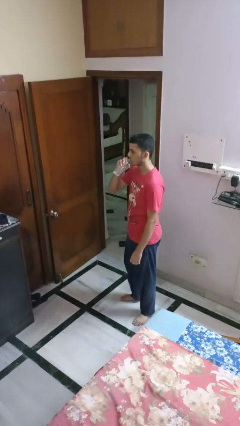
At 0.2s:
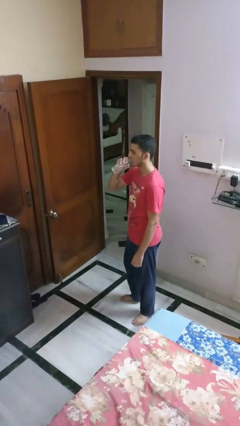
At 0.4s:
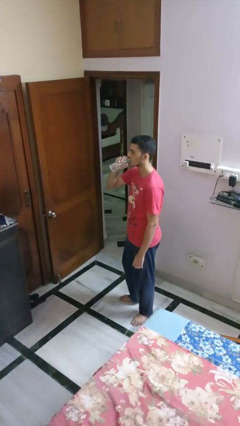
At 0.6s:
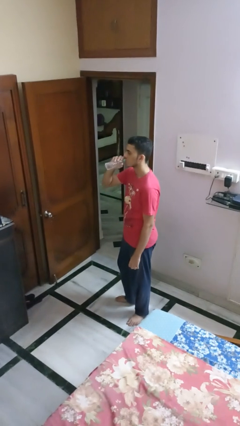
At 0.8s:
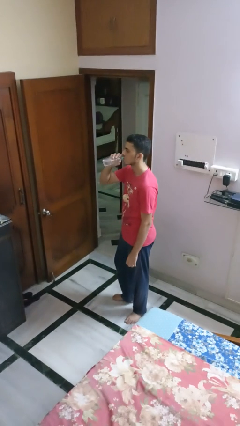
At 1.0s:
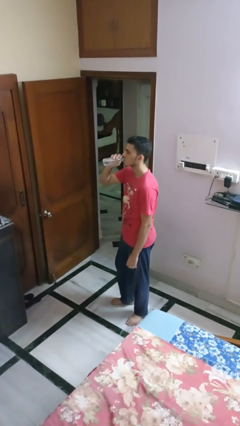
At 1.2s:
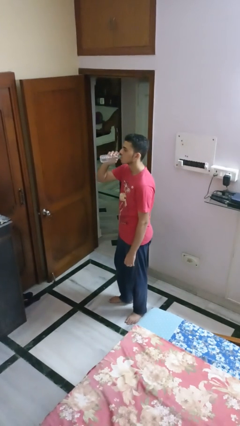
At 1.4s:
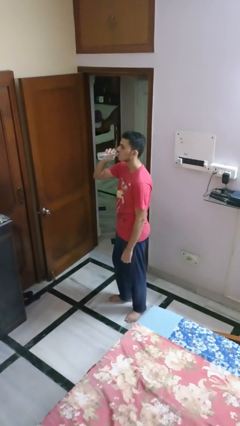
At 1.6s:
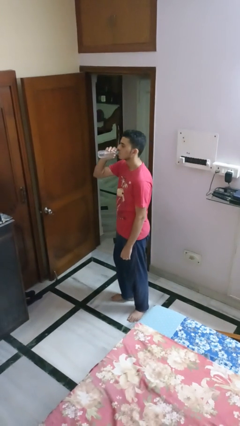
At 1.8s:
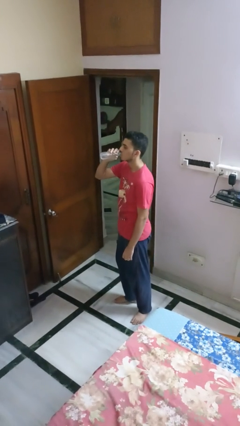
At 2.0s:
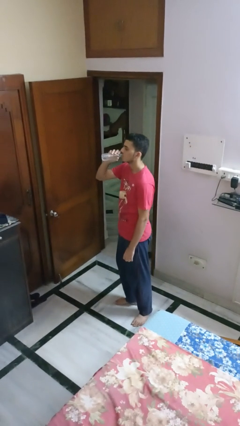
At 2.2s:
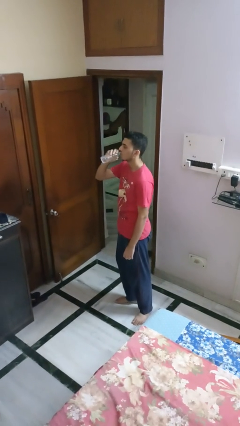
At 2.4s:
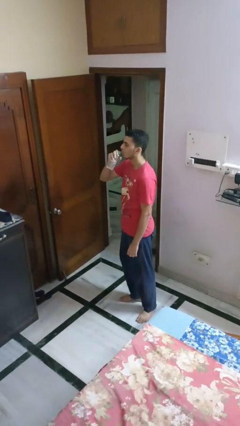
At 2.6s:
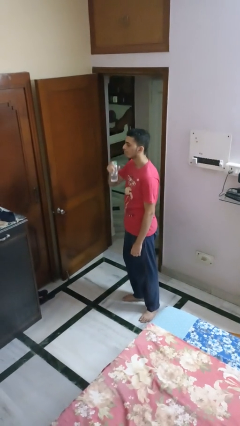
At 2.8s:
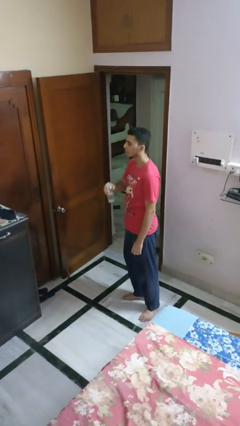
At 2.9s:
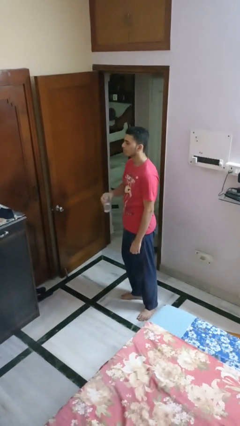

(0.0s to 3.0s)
person drinks from bottle

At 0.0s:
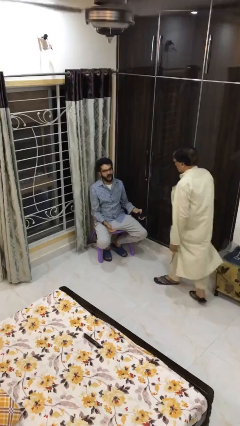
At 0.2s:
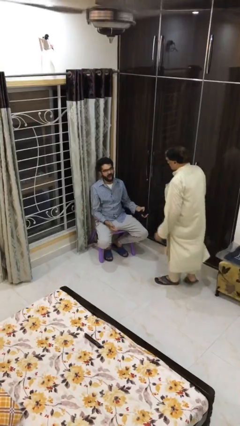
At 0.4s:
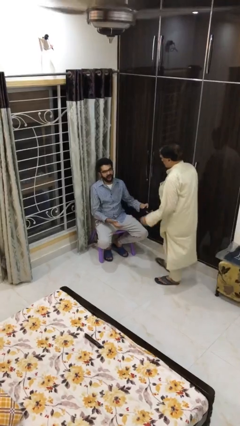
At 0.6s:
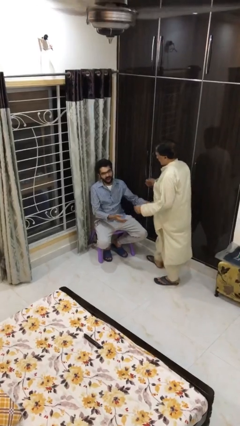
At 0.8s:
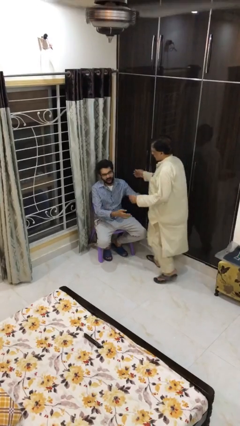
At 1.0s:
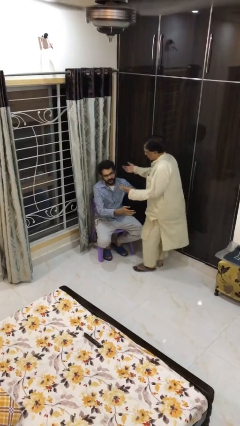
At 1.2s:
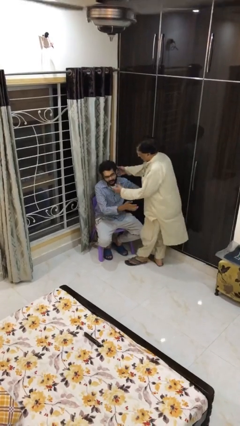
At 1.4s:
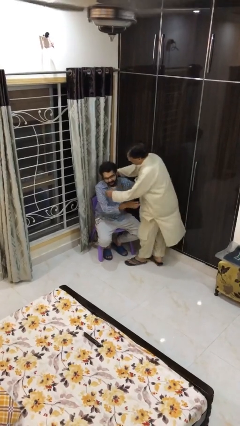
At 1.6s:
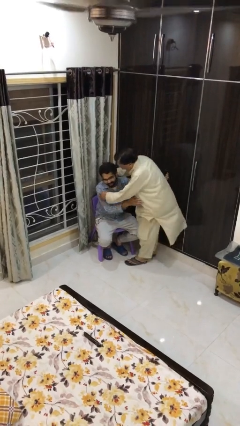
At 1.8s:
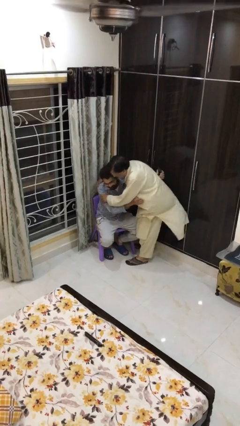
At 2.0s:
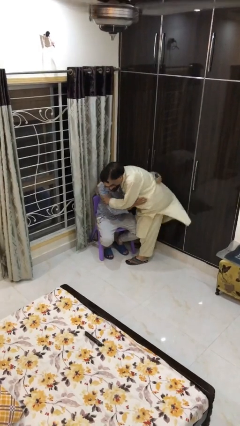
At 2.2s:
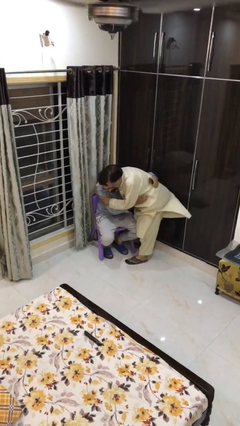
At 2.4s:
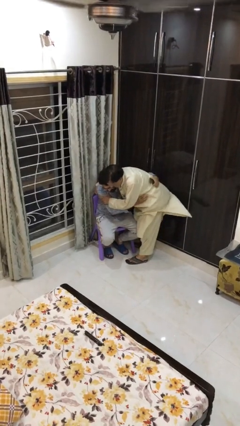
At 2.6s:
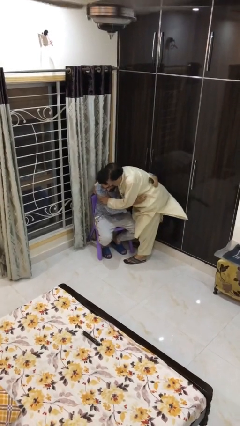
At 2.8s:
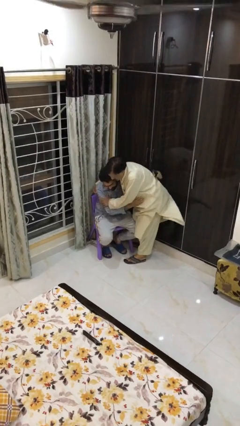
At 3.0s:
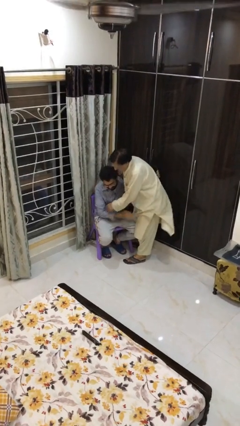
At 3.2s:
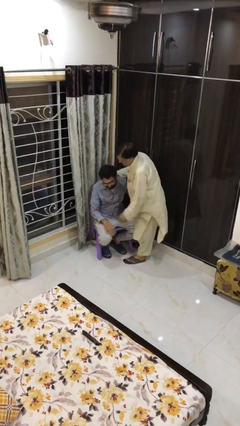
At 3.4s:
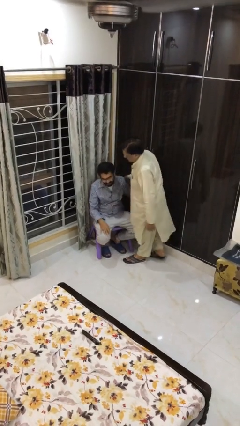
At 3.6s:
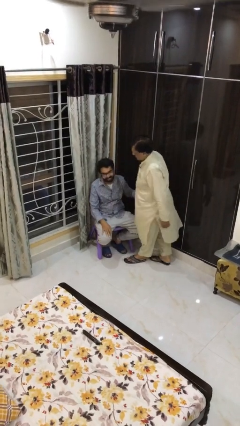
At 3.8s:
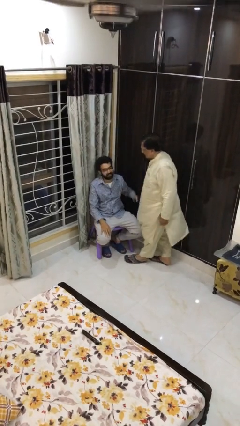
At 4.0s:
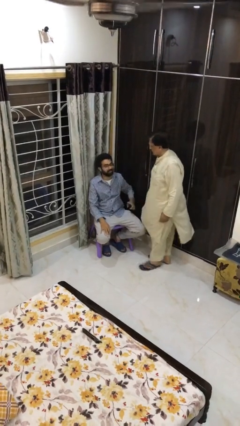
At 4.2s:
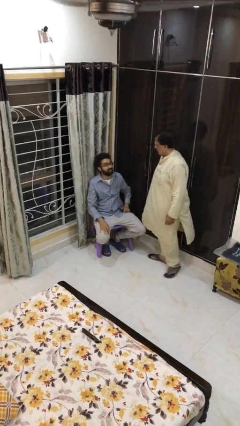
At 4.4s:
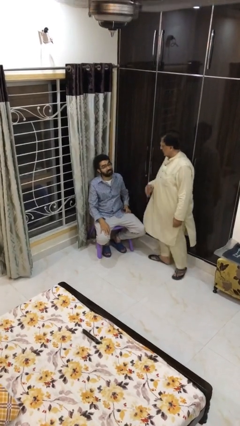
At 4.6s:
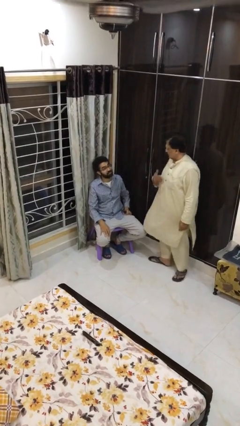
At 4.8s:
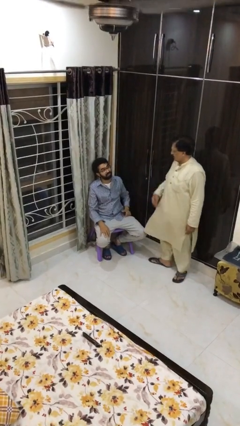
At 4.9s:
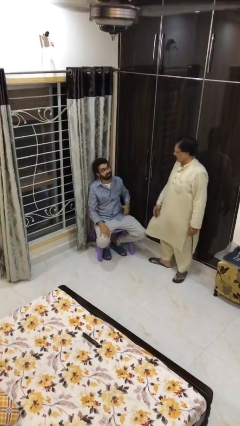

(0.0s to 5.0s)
person embraces person

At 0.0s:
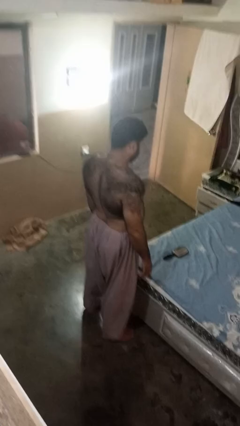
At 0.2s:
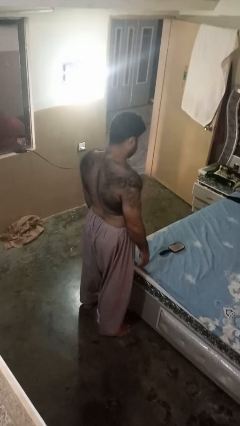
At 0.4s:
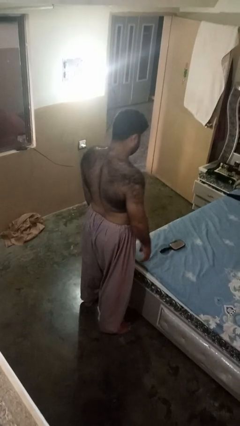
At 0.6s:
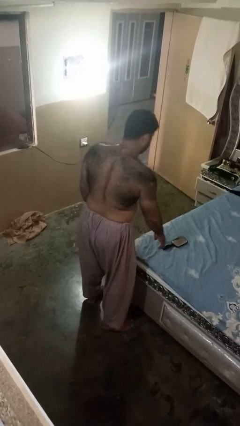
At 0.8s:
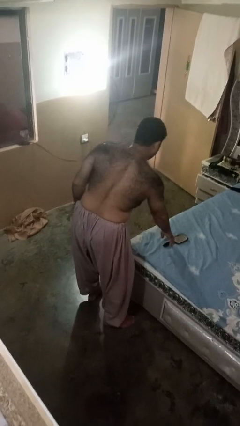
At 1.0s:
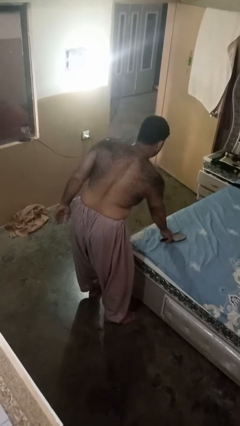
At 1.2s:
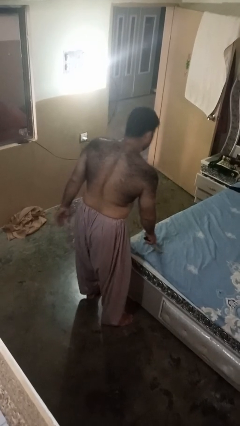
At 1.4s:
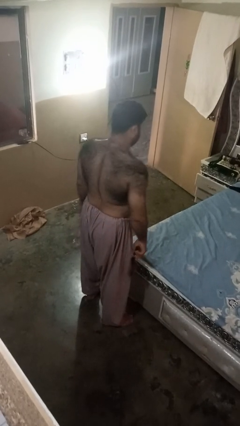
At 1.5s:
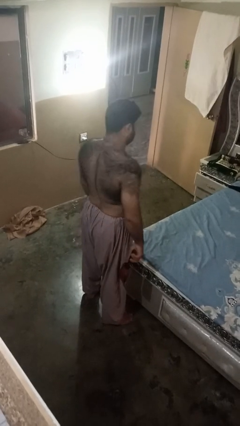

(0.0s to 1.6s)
person picks up object from bed

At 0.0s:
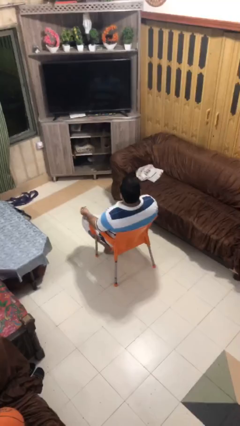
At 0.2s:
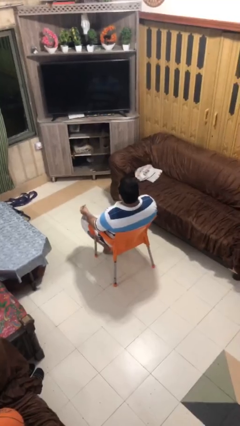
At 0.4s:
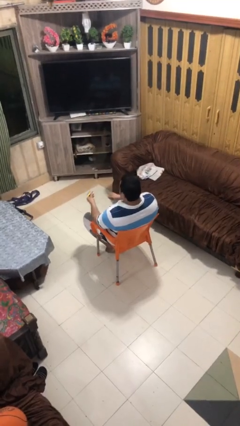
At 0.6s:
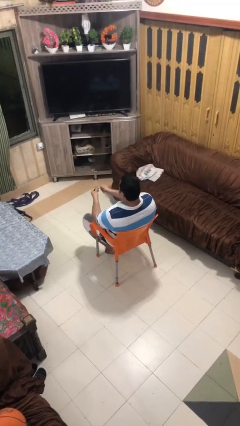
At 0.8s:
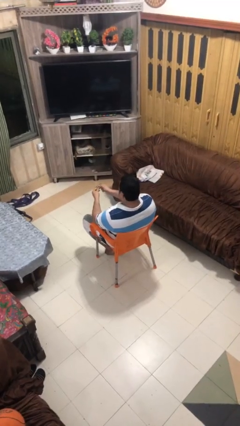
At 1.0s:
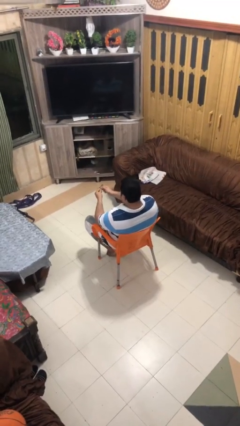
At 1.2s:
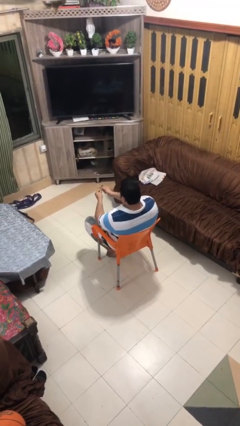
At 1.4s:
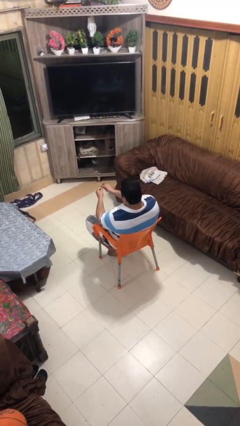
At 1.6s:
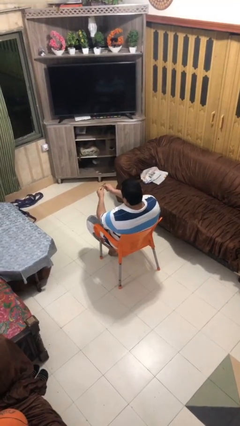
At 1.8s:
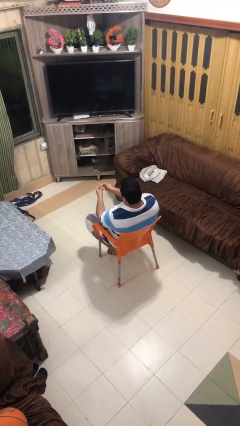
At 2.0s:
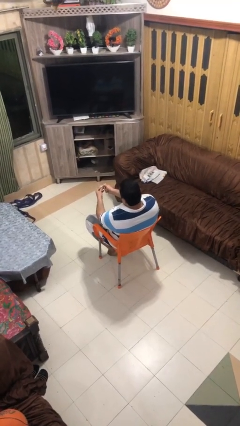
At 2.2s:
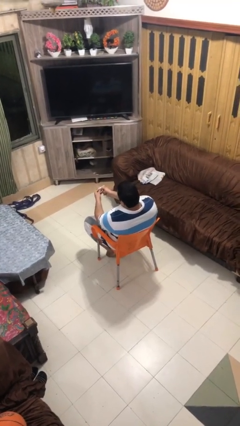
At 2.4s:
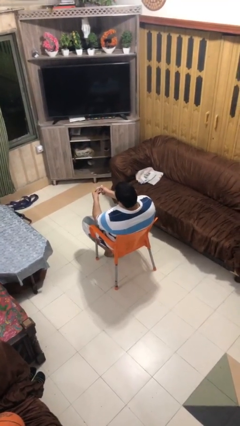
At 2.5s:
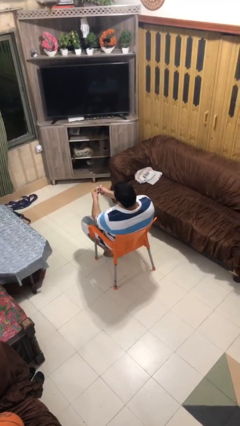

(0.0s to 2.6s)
person files fingernails

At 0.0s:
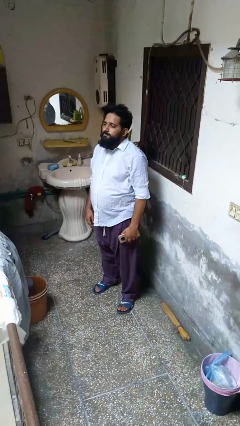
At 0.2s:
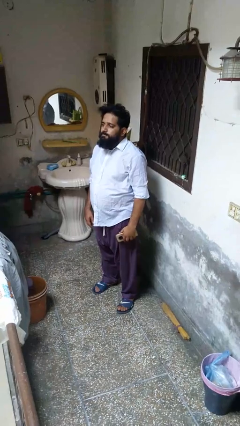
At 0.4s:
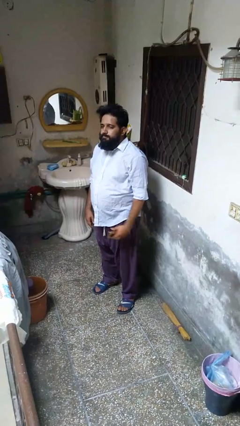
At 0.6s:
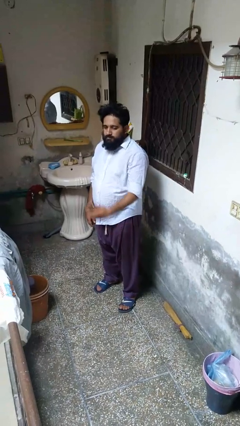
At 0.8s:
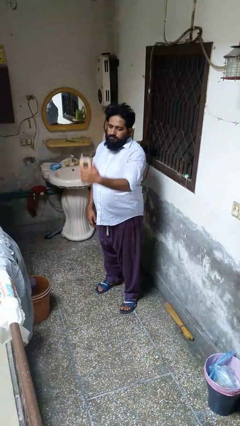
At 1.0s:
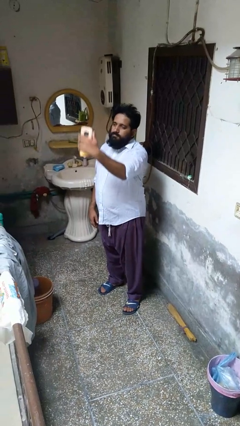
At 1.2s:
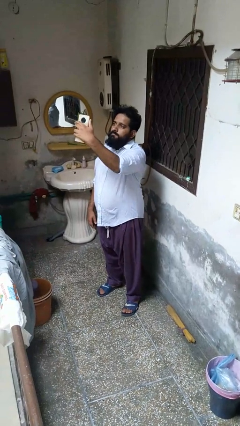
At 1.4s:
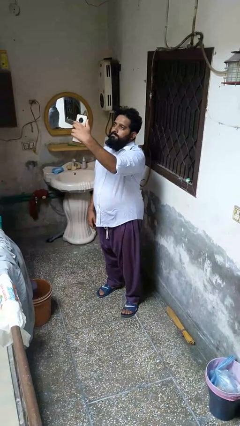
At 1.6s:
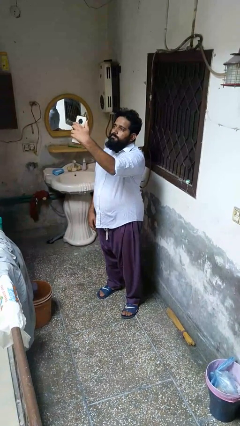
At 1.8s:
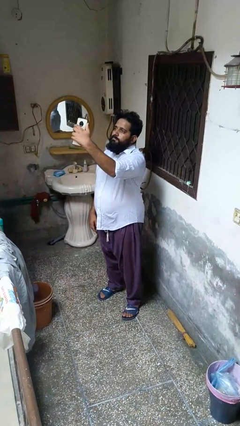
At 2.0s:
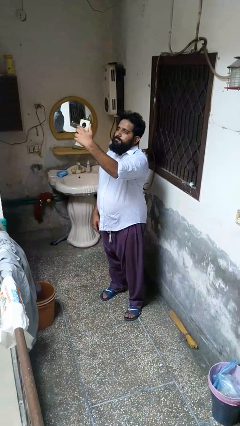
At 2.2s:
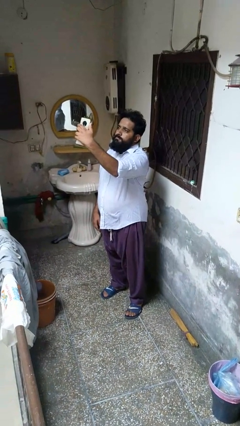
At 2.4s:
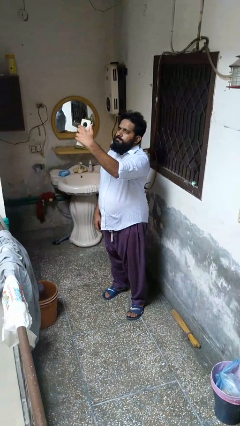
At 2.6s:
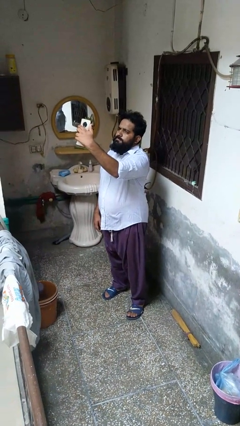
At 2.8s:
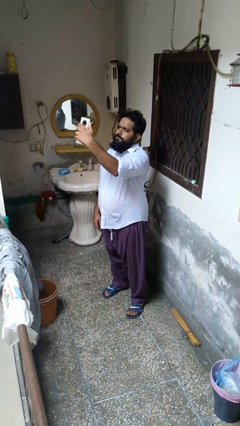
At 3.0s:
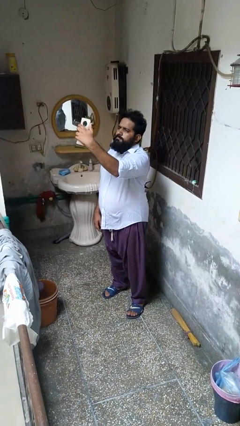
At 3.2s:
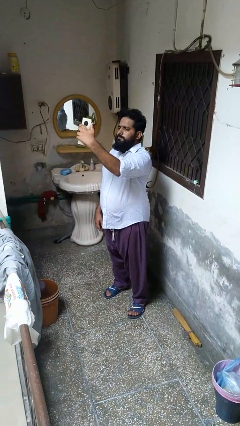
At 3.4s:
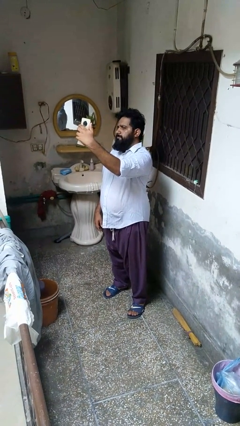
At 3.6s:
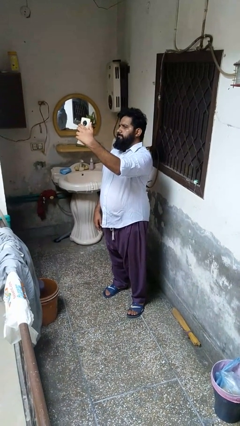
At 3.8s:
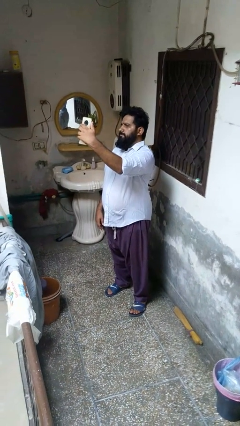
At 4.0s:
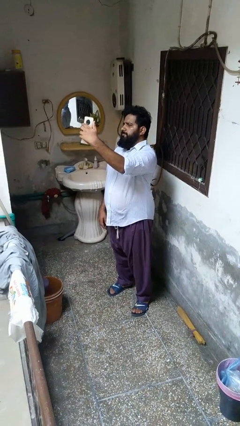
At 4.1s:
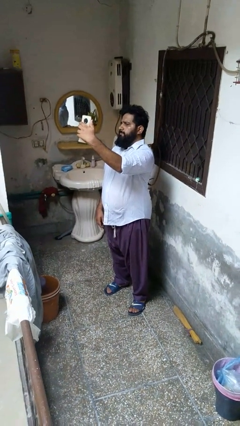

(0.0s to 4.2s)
person takes selfie

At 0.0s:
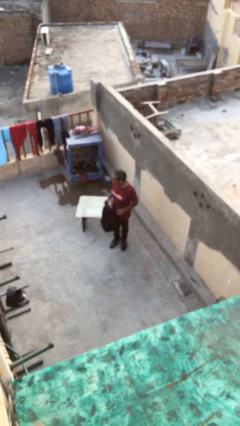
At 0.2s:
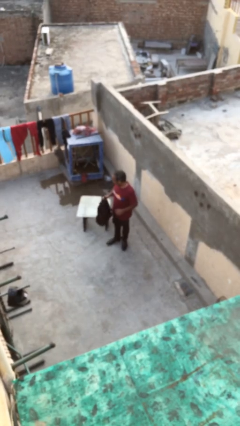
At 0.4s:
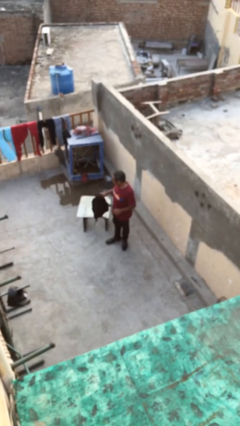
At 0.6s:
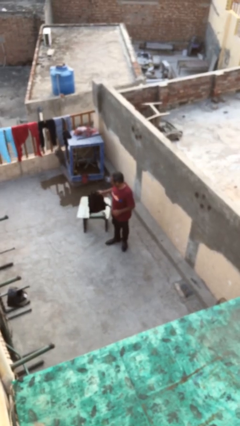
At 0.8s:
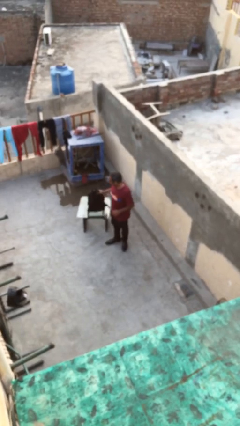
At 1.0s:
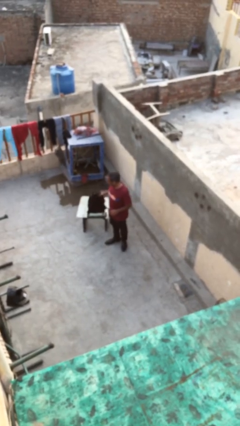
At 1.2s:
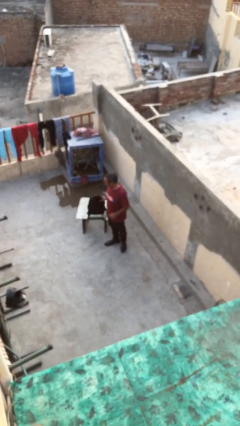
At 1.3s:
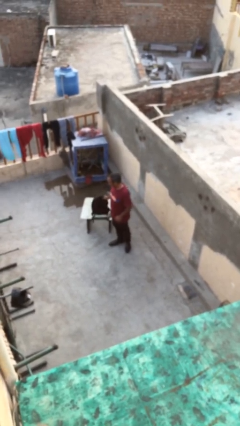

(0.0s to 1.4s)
person puts down object on table
